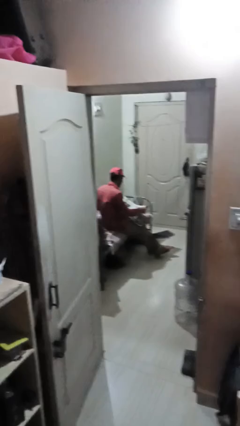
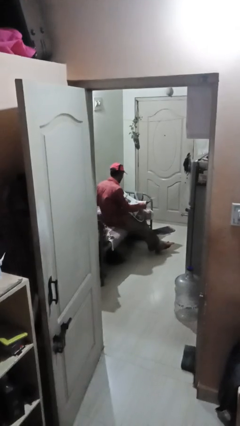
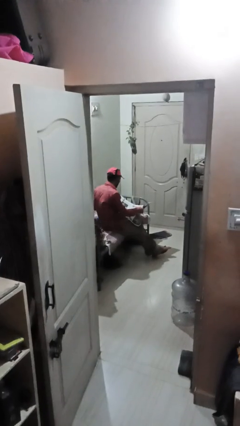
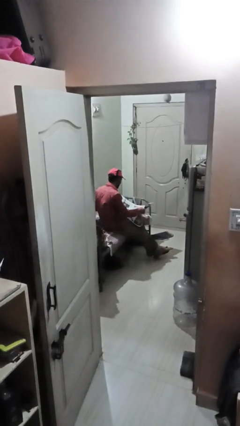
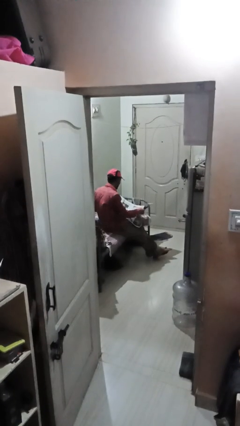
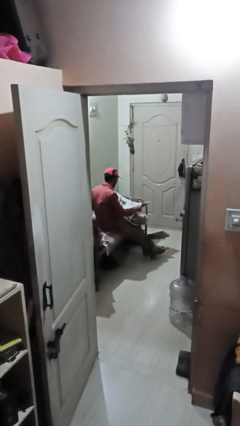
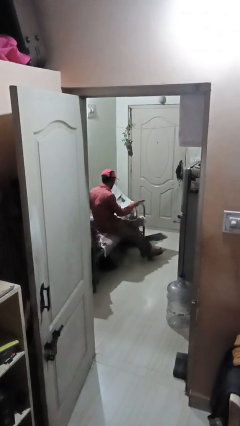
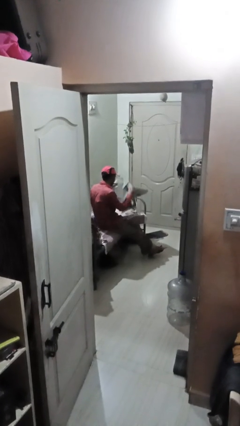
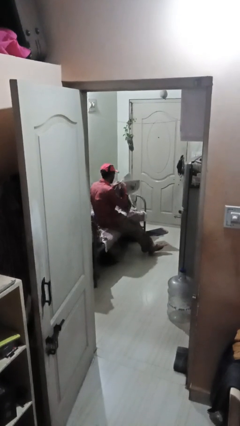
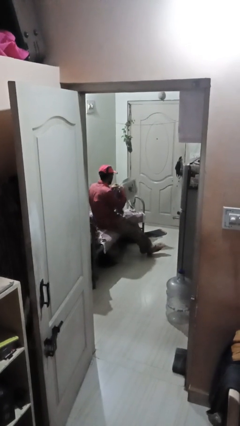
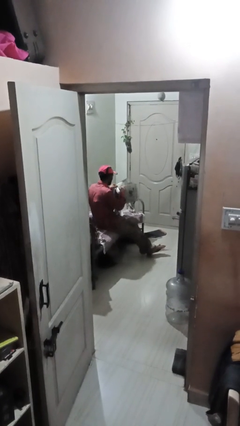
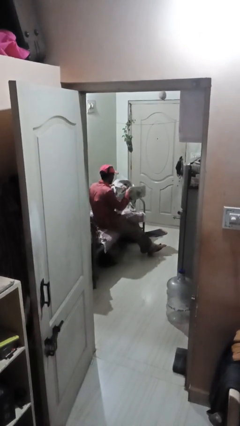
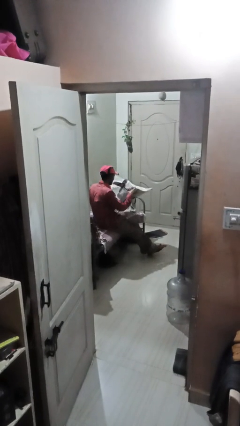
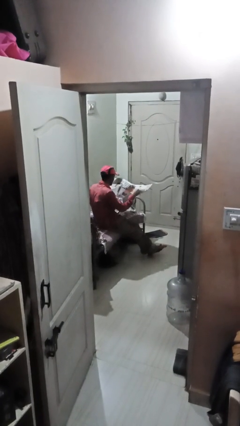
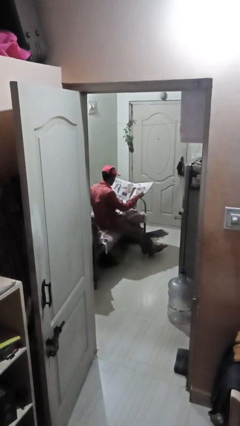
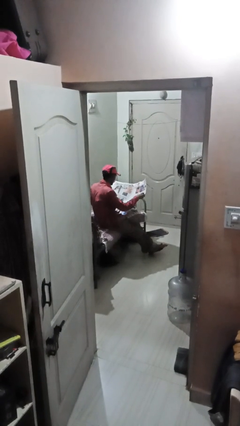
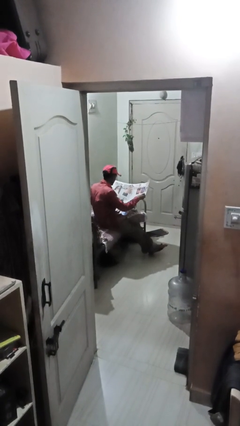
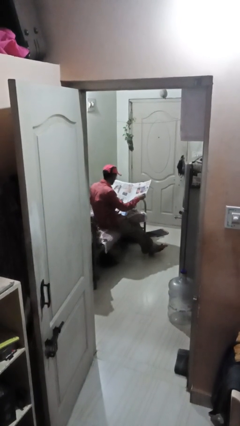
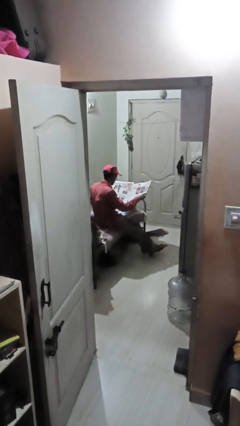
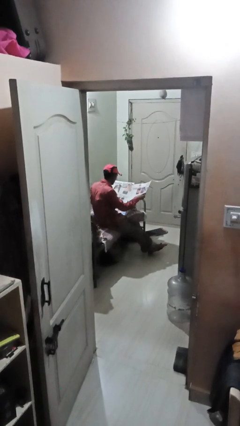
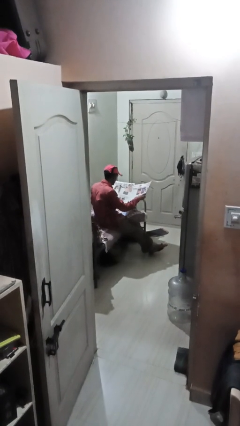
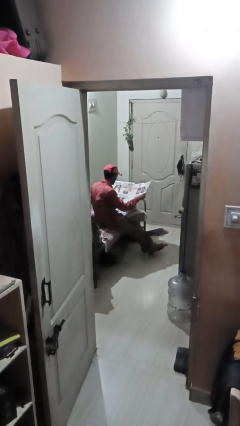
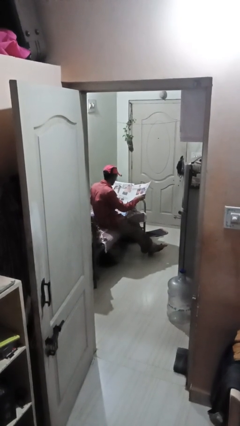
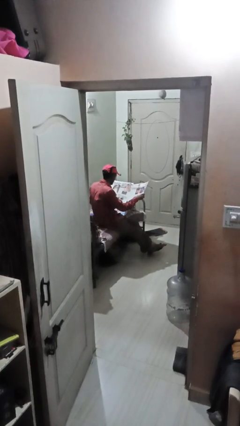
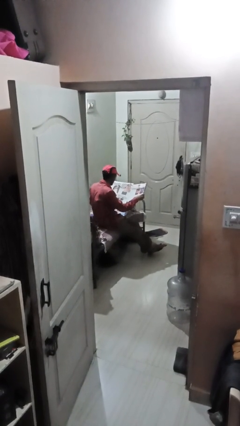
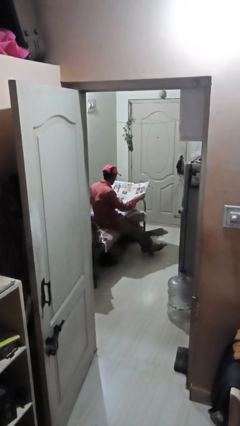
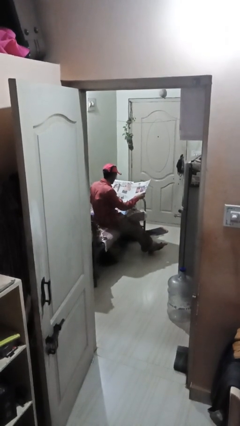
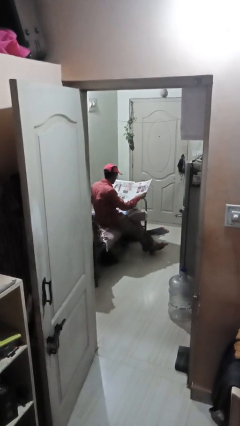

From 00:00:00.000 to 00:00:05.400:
person reads newspaper

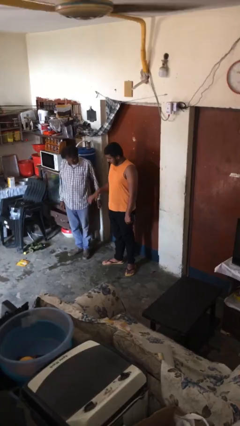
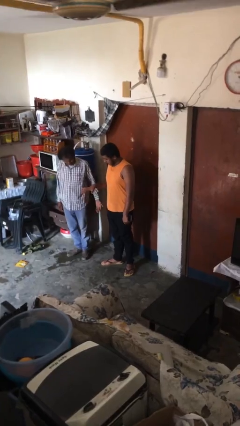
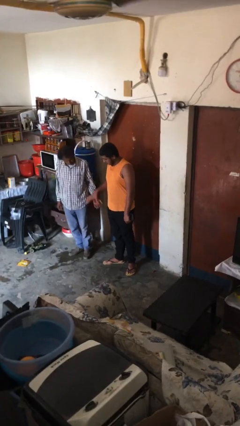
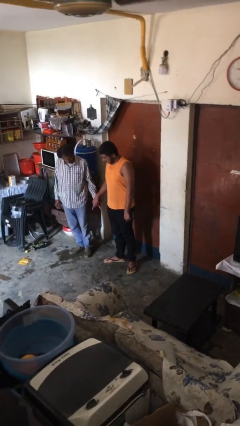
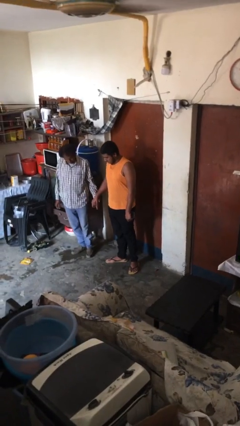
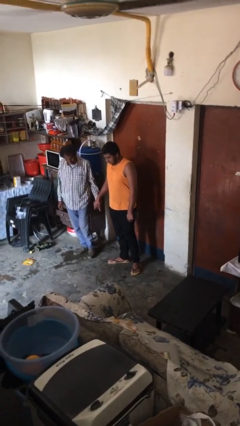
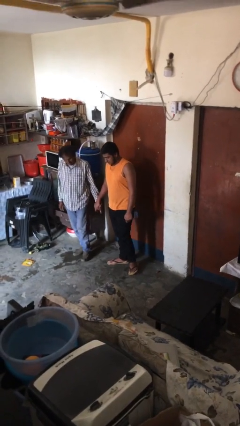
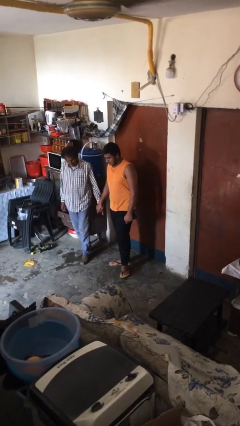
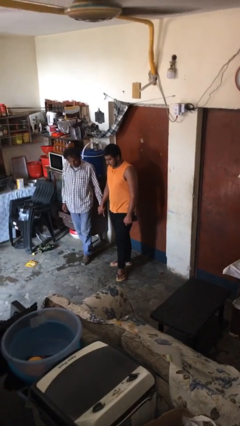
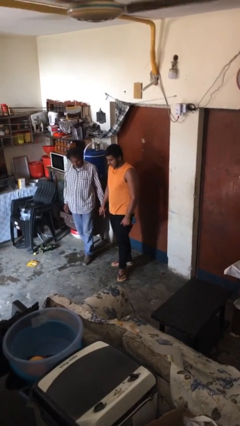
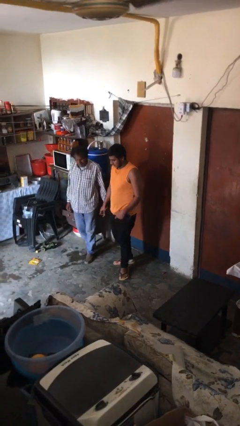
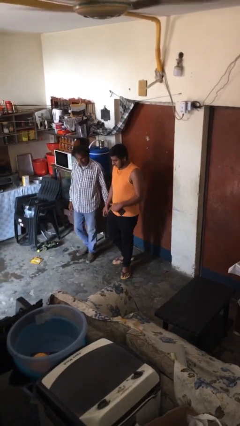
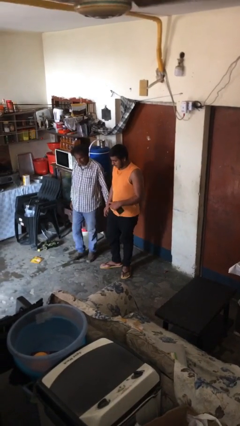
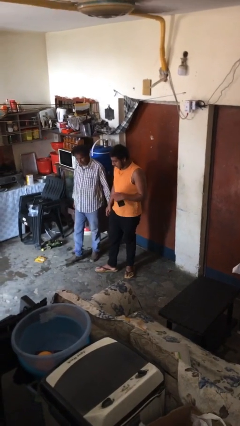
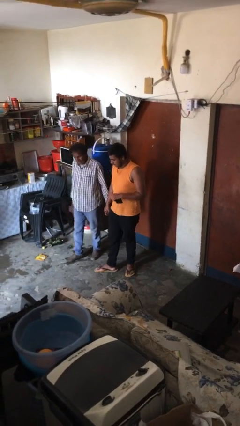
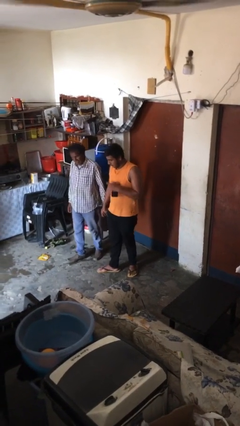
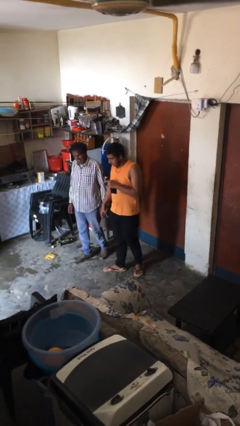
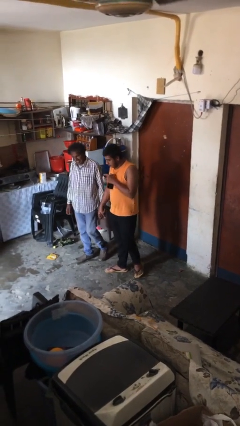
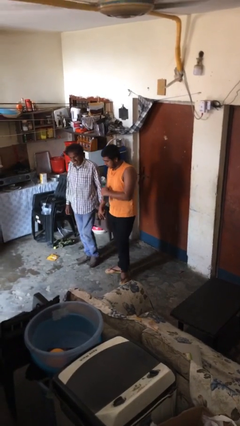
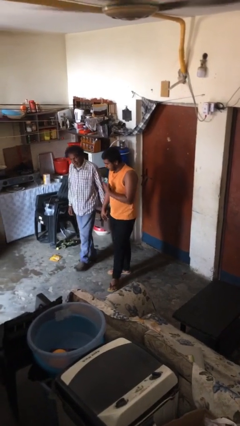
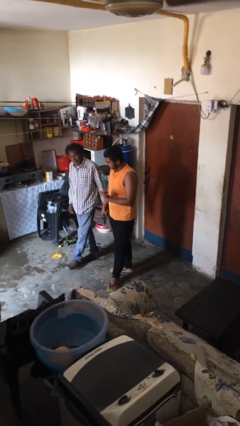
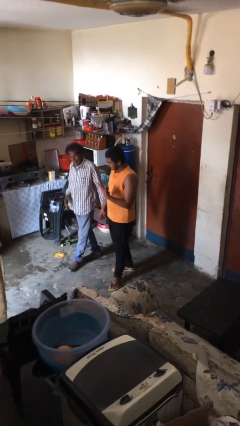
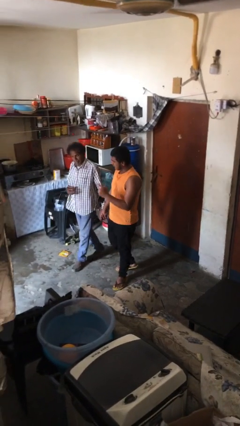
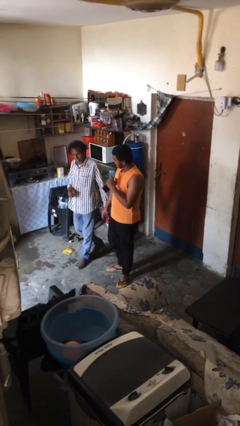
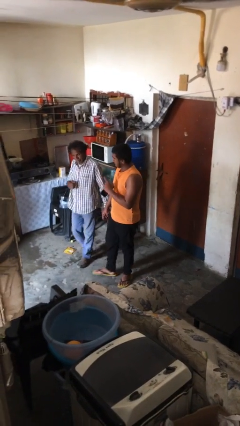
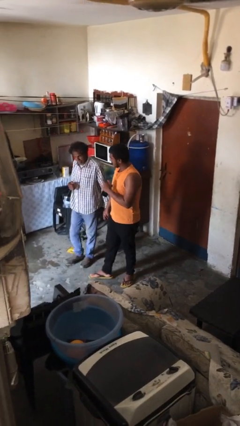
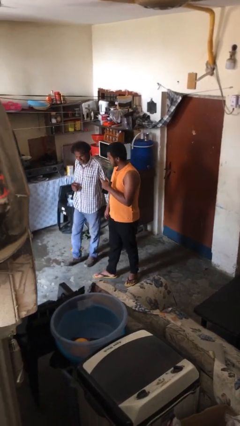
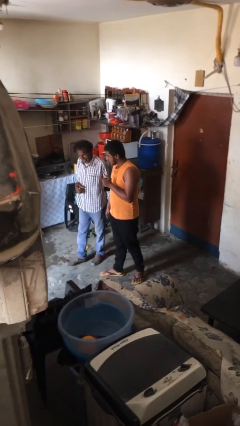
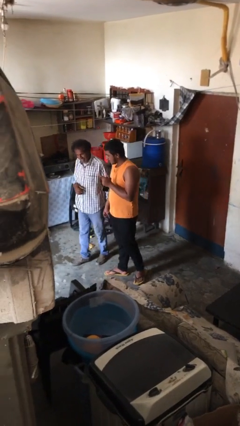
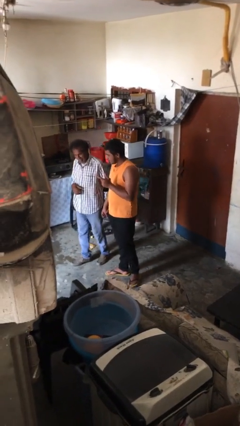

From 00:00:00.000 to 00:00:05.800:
person holds hand

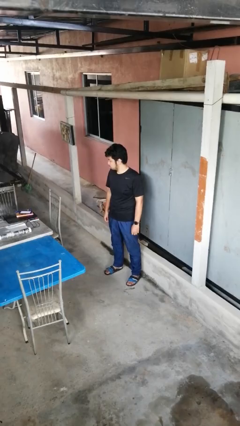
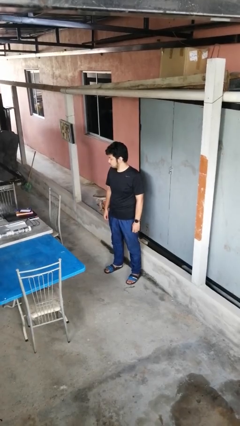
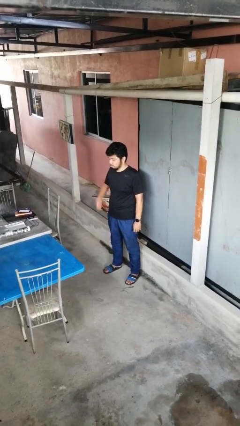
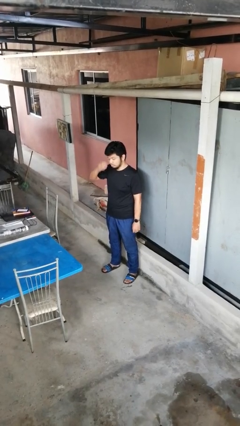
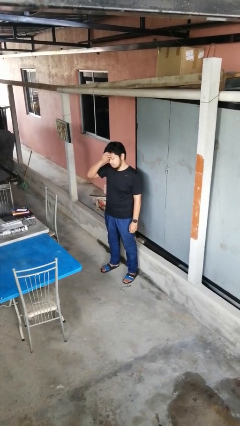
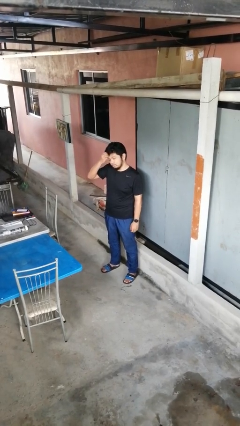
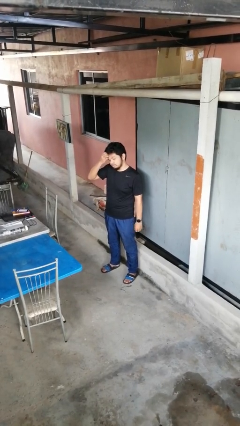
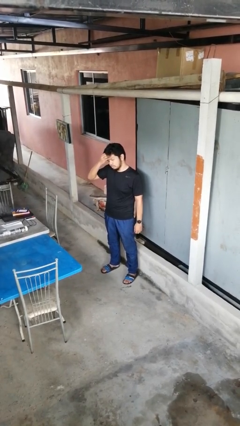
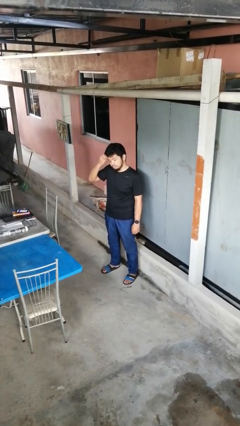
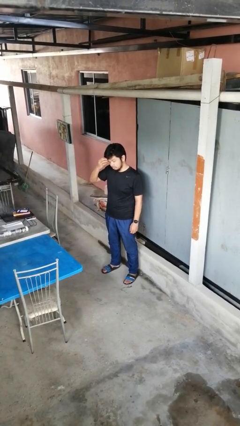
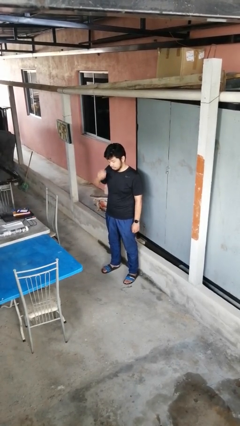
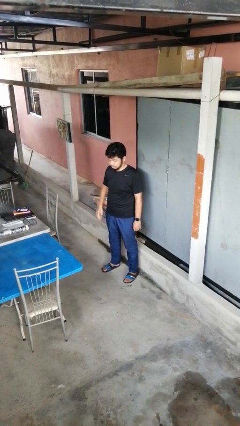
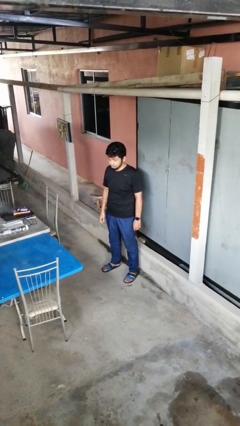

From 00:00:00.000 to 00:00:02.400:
person scratches face

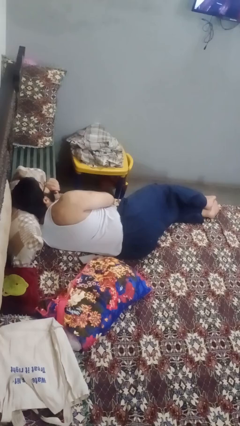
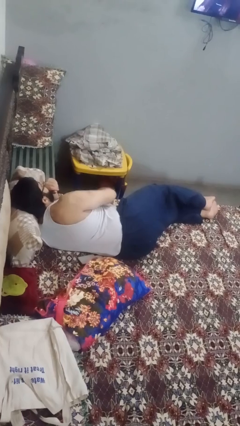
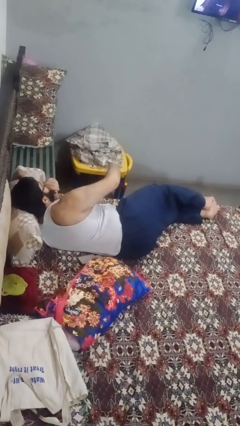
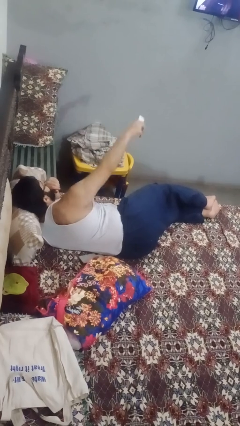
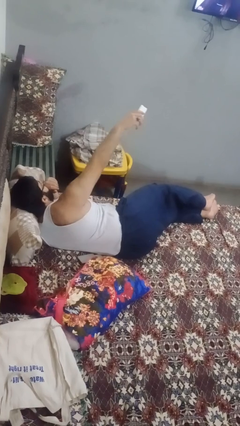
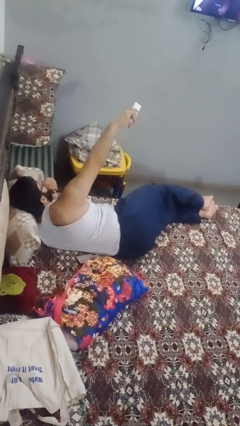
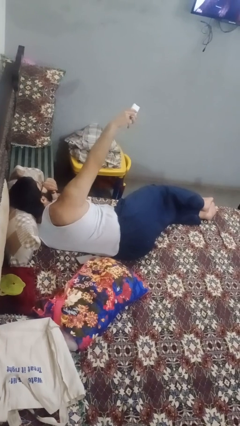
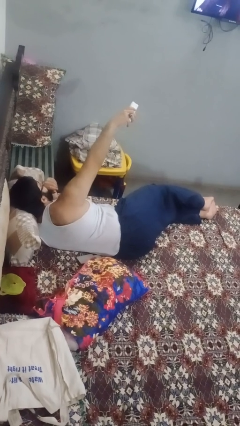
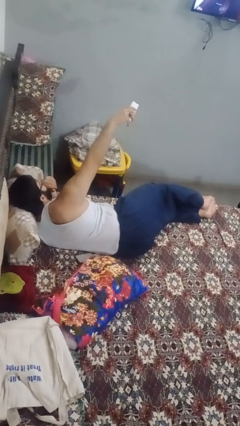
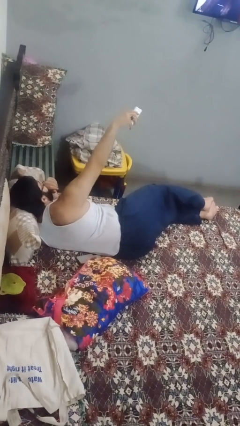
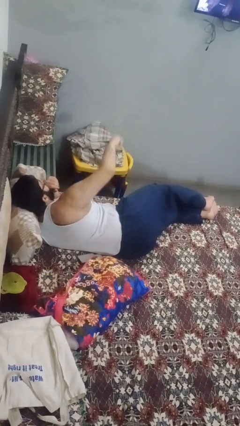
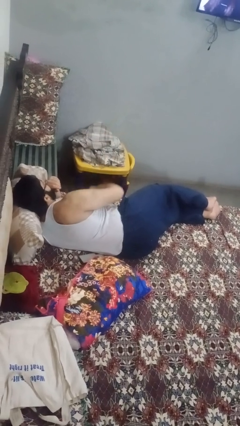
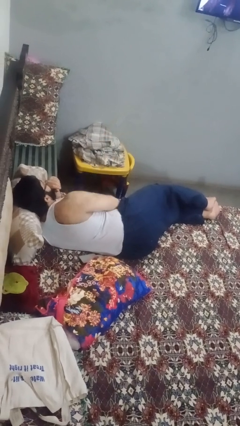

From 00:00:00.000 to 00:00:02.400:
person uses television remote

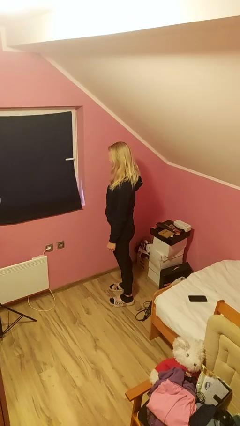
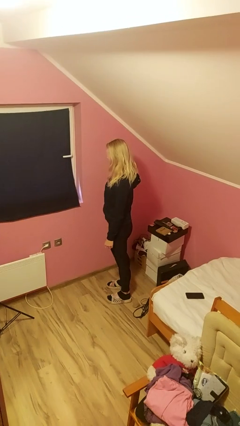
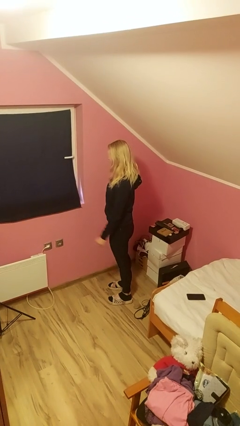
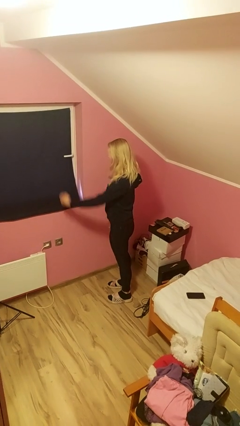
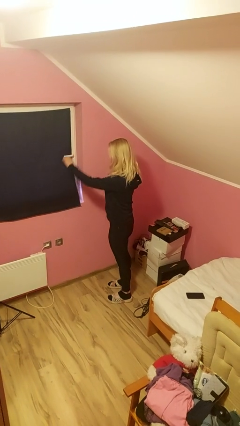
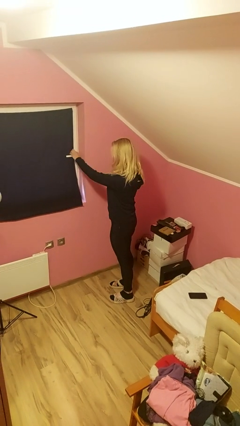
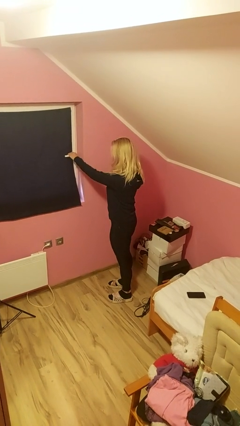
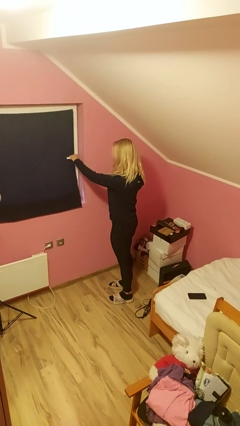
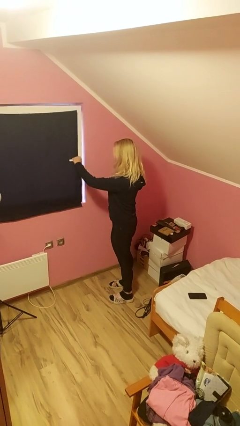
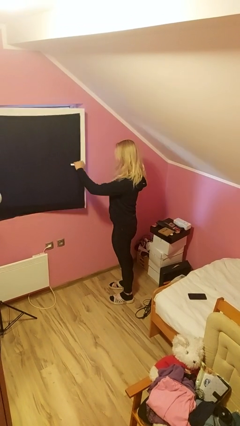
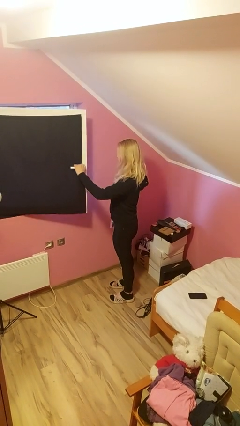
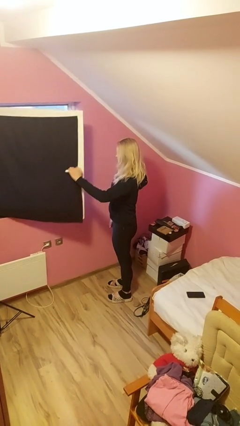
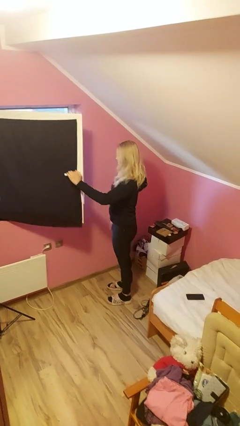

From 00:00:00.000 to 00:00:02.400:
person opens home window
